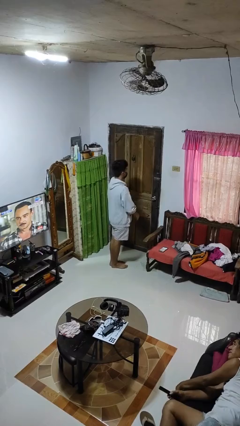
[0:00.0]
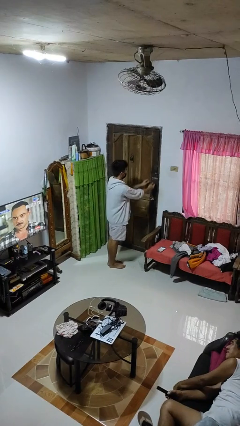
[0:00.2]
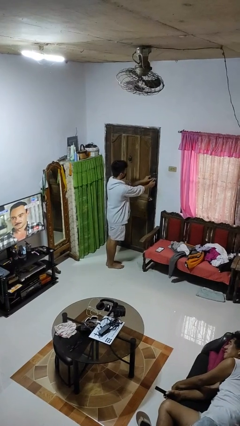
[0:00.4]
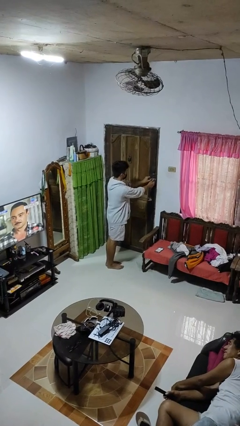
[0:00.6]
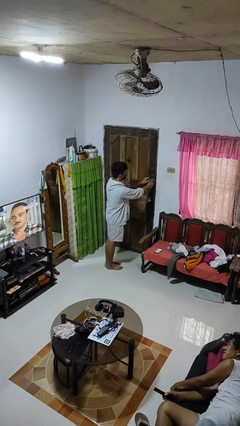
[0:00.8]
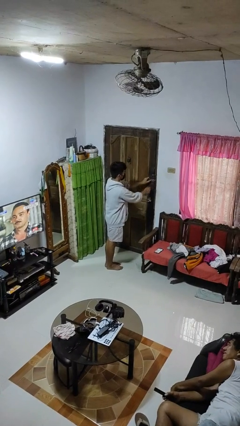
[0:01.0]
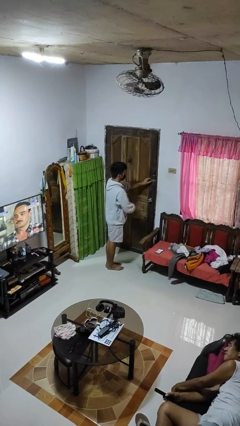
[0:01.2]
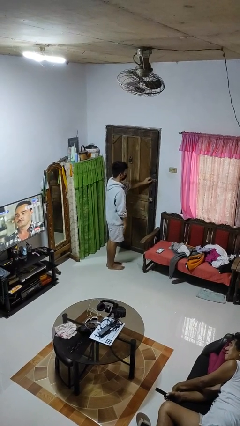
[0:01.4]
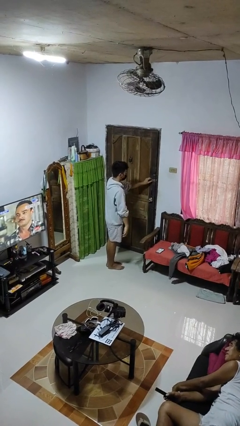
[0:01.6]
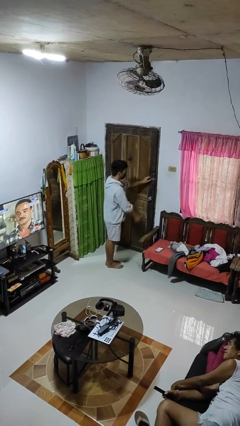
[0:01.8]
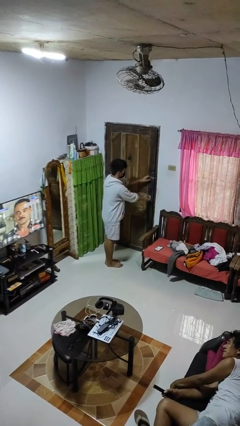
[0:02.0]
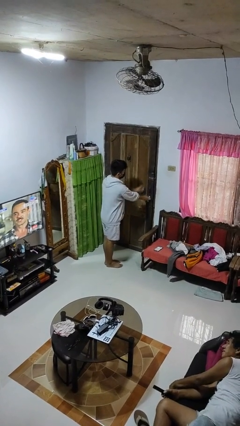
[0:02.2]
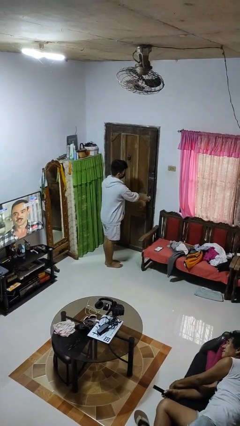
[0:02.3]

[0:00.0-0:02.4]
person unlocks door with keys

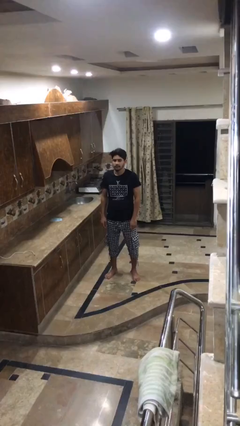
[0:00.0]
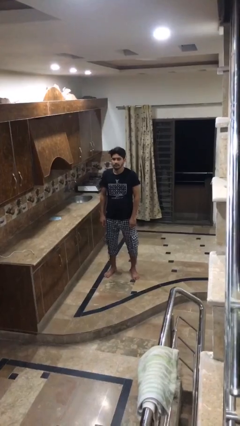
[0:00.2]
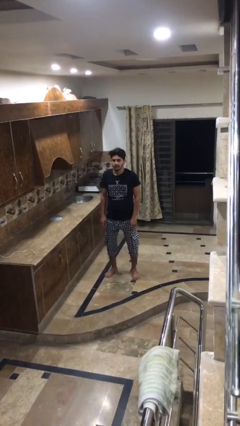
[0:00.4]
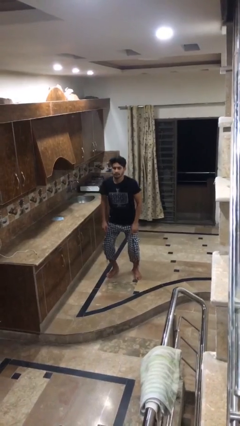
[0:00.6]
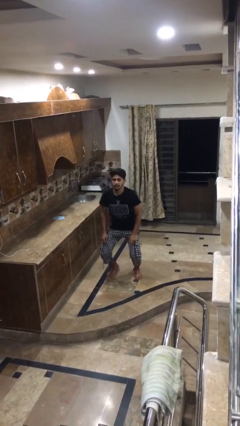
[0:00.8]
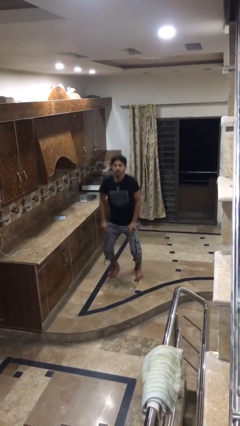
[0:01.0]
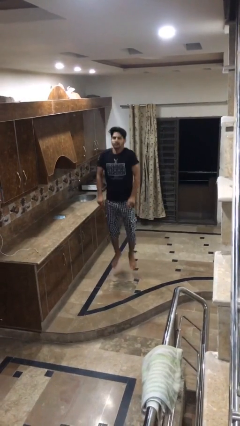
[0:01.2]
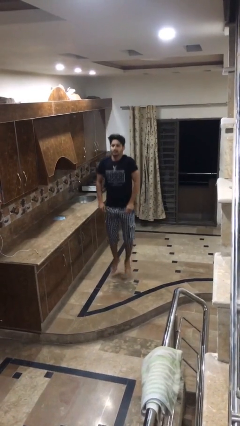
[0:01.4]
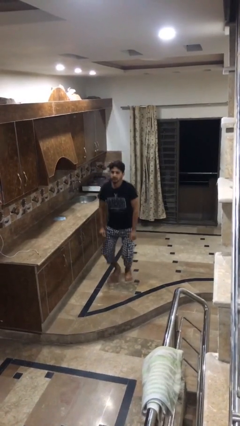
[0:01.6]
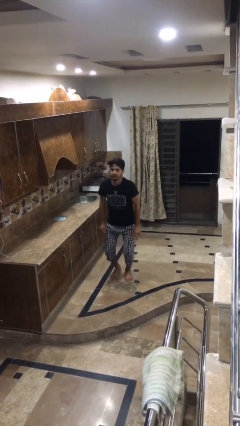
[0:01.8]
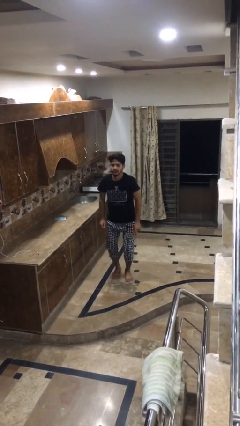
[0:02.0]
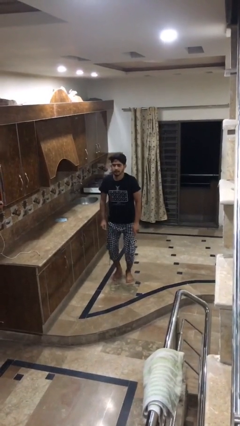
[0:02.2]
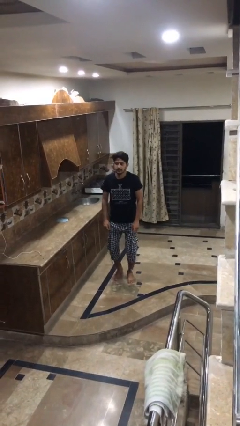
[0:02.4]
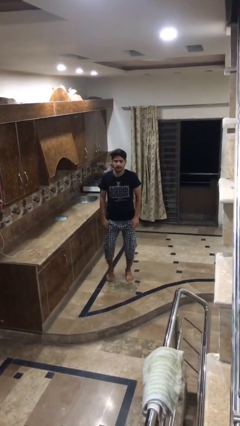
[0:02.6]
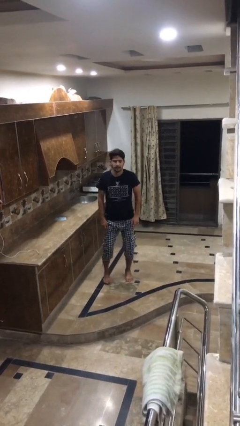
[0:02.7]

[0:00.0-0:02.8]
person jumps

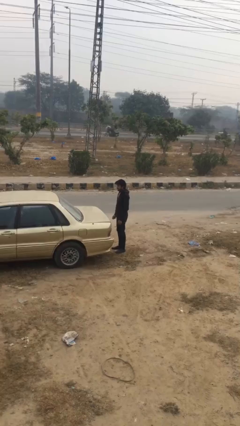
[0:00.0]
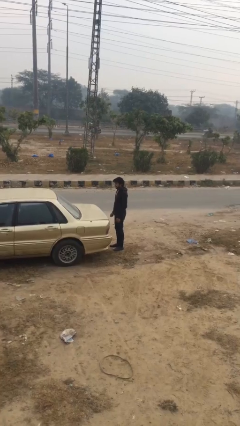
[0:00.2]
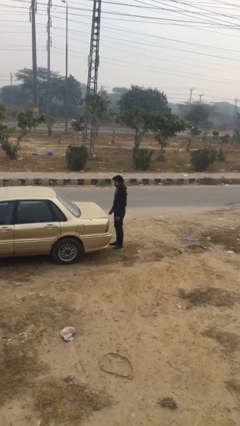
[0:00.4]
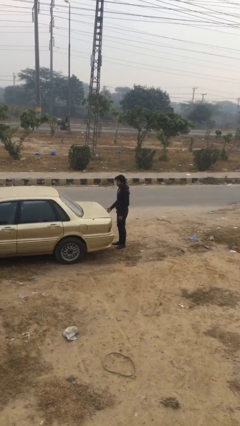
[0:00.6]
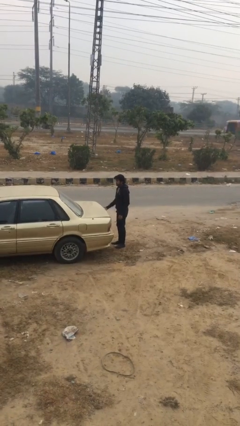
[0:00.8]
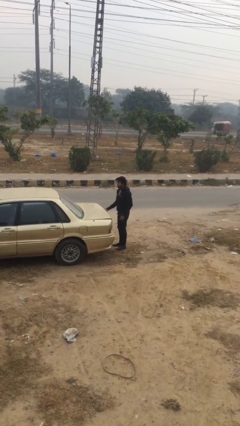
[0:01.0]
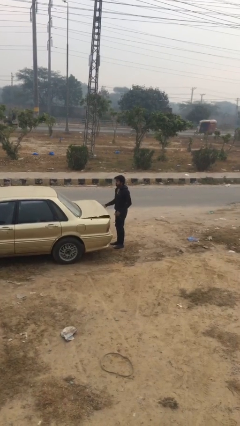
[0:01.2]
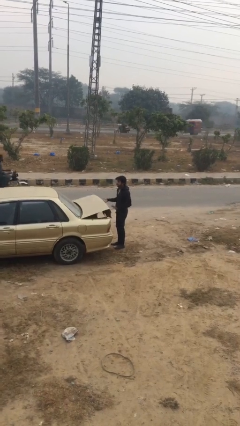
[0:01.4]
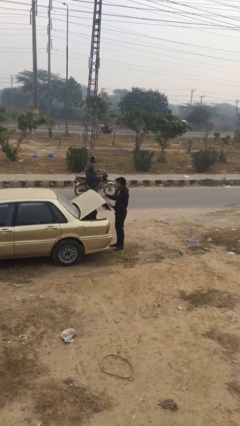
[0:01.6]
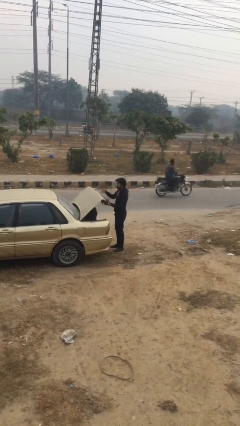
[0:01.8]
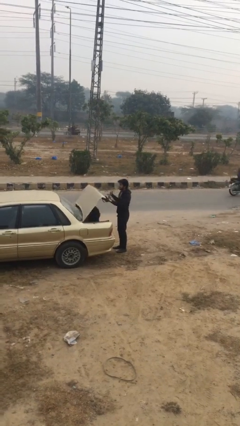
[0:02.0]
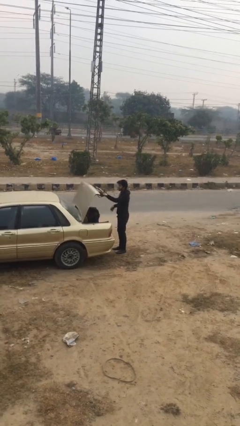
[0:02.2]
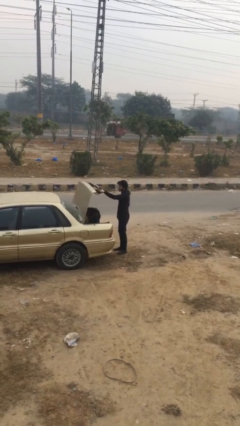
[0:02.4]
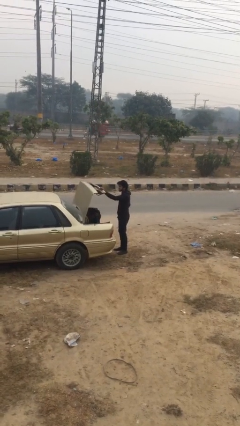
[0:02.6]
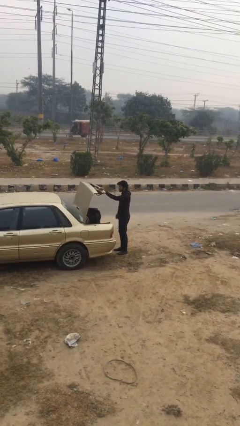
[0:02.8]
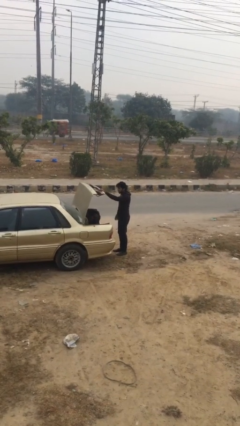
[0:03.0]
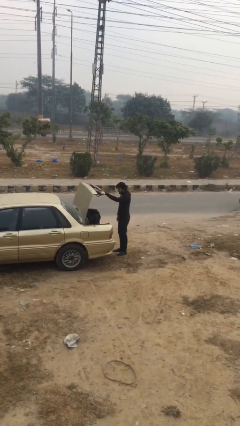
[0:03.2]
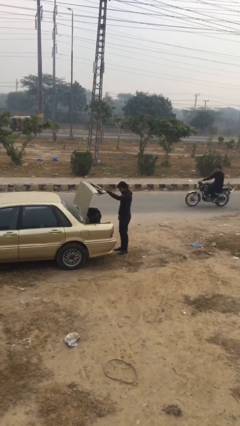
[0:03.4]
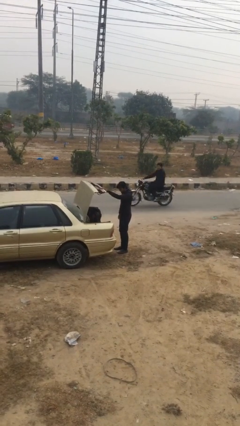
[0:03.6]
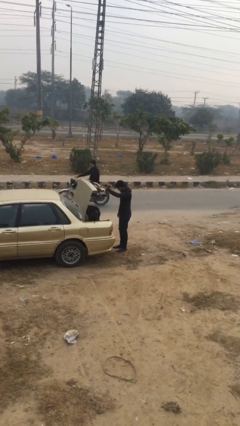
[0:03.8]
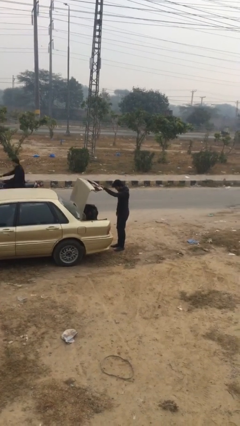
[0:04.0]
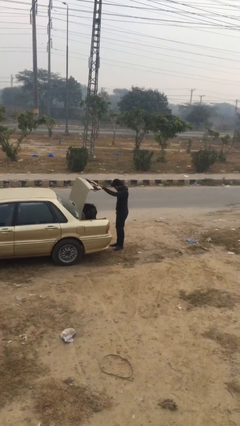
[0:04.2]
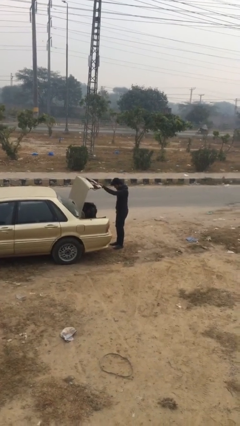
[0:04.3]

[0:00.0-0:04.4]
person opens car trunk

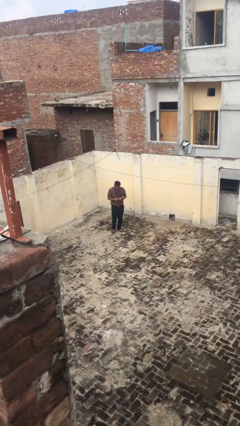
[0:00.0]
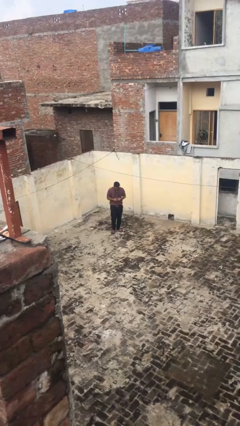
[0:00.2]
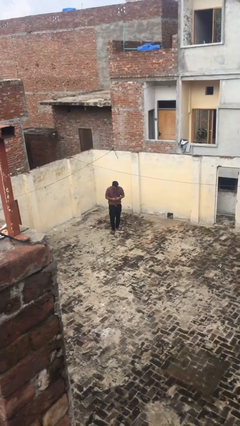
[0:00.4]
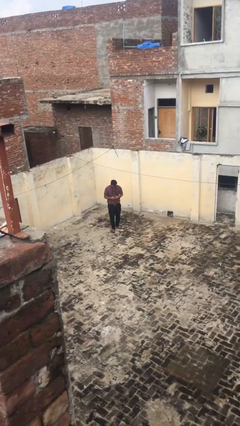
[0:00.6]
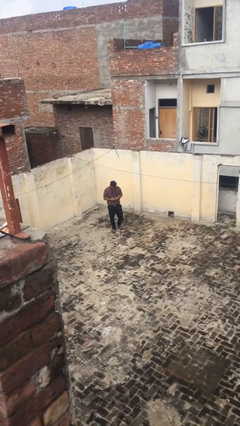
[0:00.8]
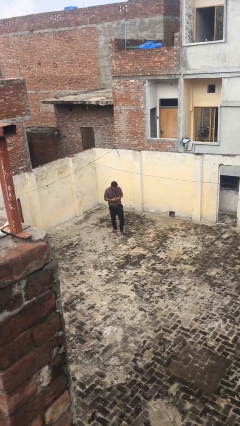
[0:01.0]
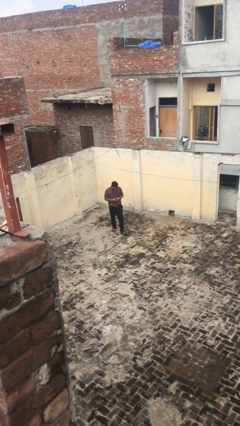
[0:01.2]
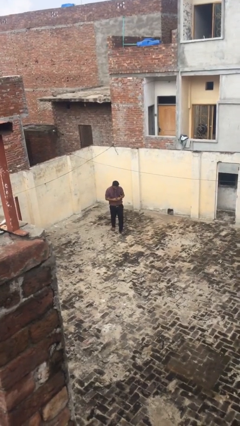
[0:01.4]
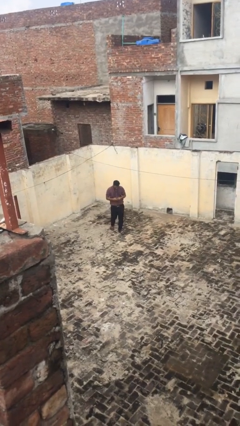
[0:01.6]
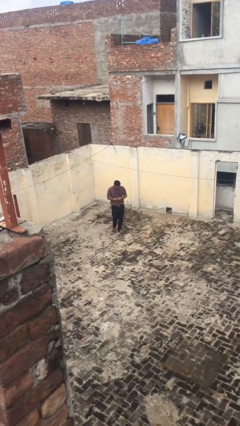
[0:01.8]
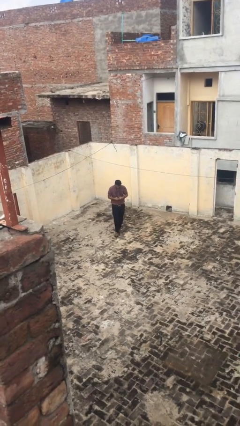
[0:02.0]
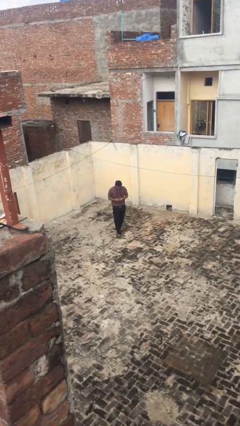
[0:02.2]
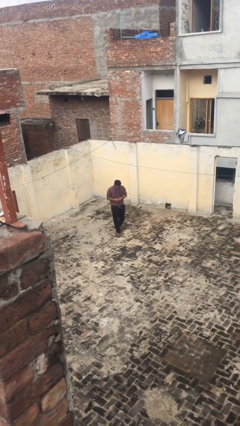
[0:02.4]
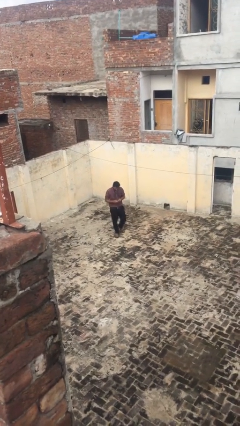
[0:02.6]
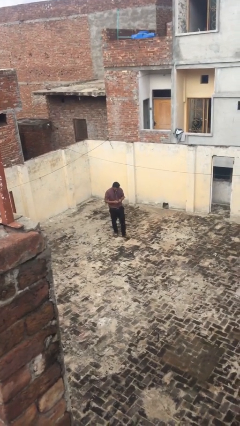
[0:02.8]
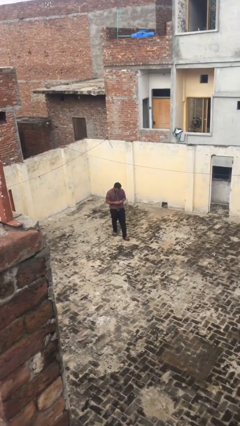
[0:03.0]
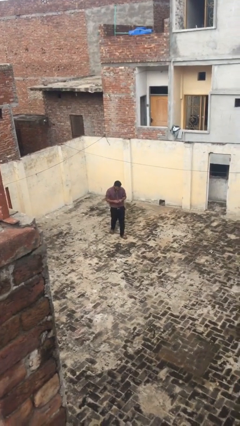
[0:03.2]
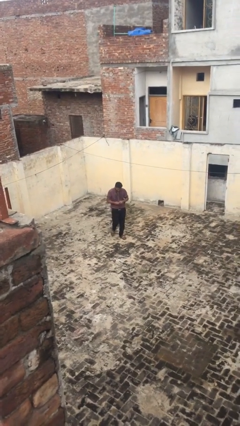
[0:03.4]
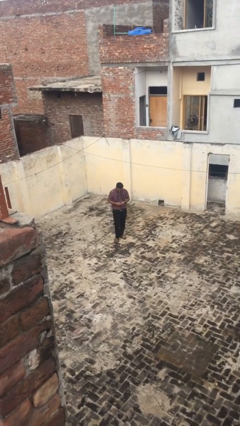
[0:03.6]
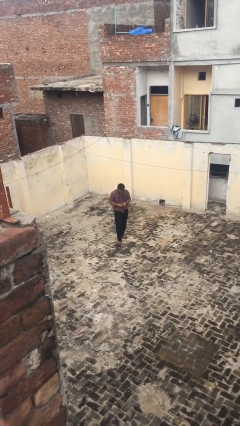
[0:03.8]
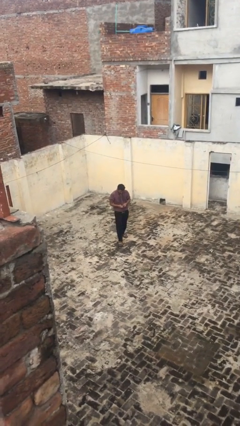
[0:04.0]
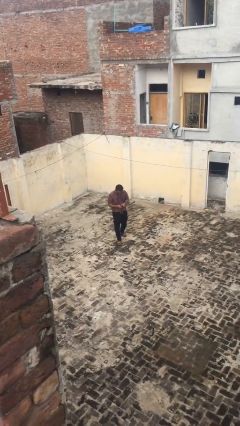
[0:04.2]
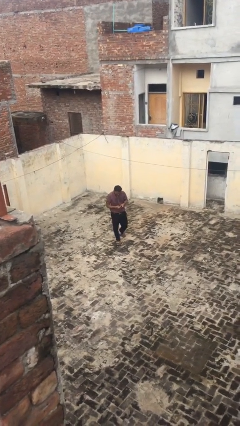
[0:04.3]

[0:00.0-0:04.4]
person texts on phone

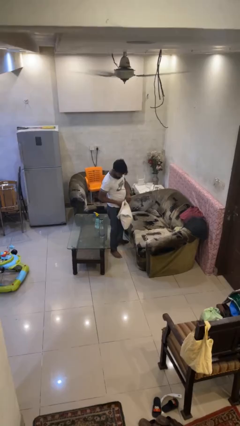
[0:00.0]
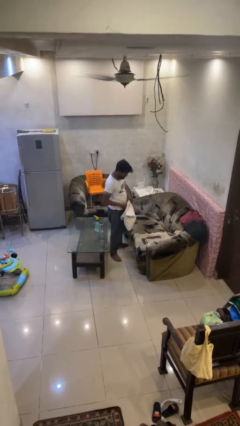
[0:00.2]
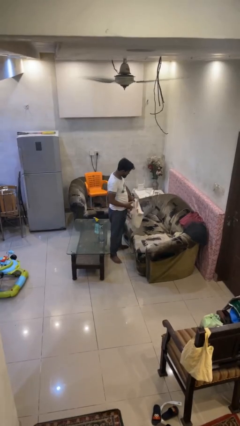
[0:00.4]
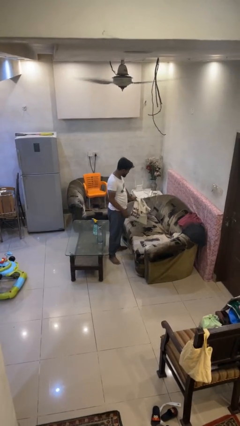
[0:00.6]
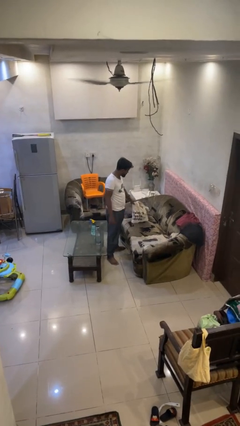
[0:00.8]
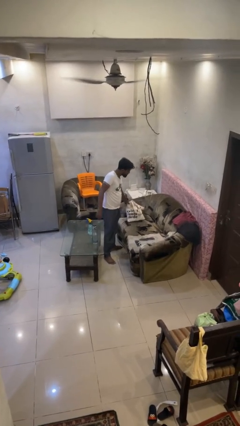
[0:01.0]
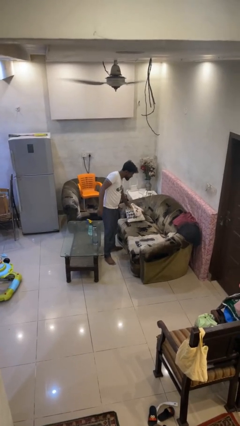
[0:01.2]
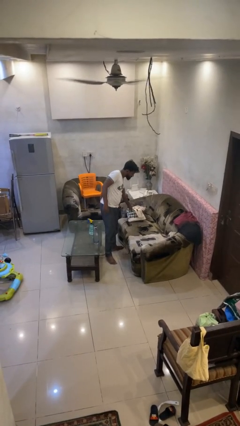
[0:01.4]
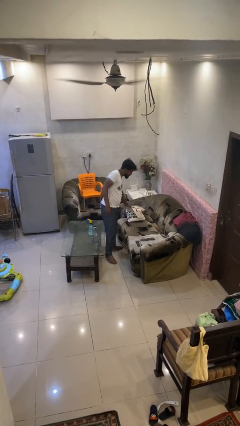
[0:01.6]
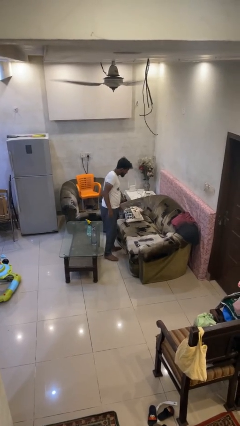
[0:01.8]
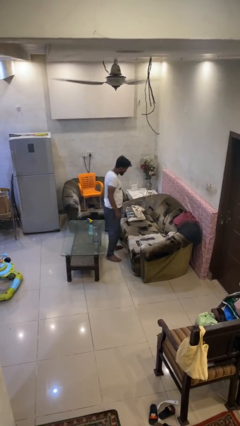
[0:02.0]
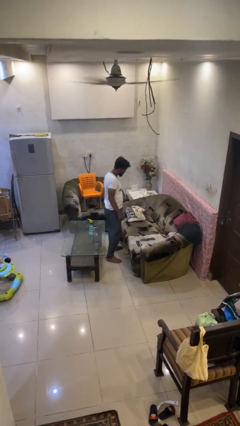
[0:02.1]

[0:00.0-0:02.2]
person puts down object on couch

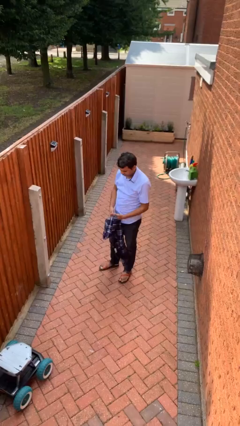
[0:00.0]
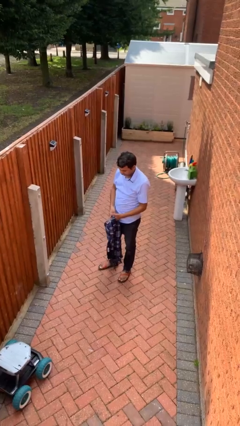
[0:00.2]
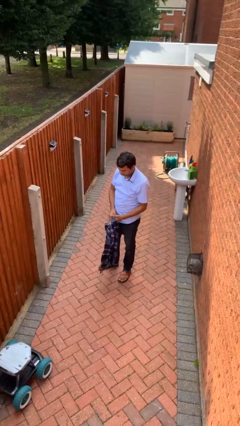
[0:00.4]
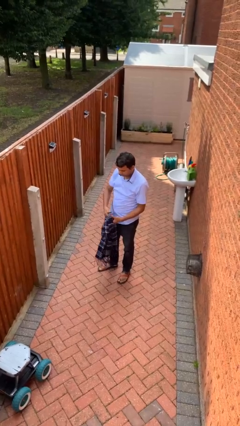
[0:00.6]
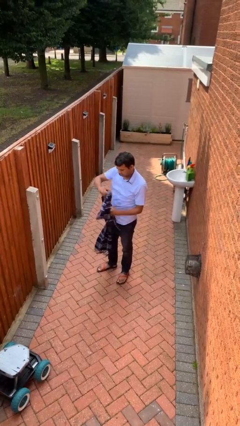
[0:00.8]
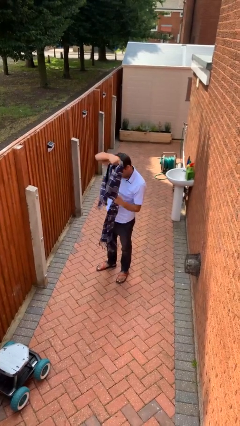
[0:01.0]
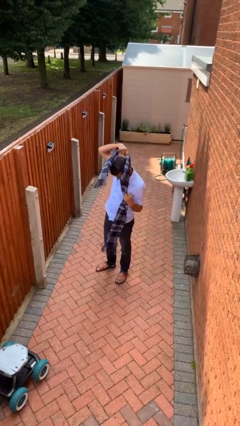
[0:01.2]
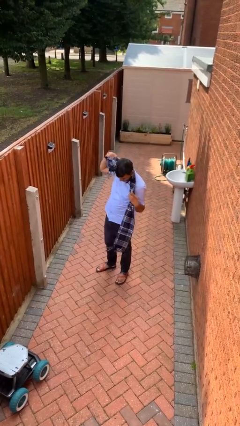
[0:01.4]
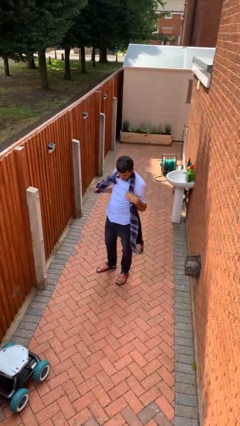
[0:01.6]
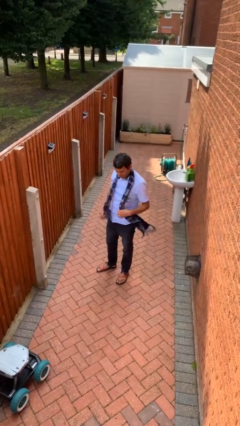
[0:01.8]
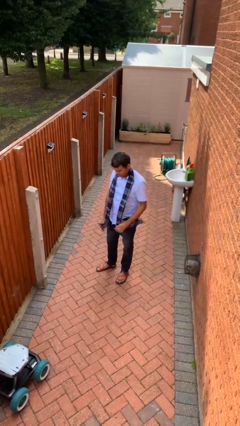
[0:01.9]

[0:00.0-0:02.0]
person puts on scarf
